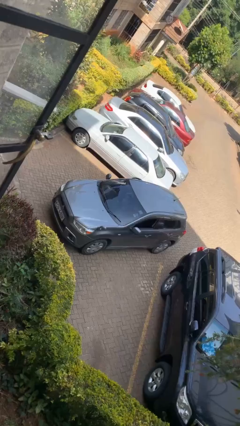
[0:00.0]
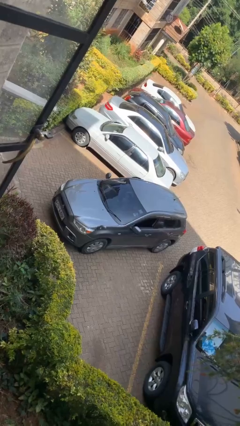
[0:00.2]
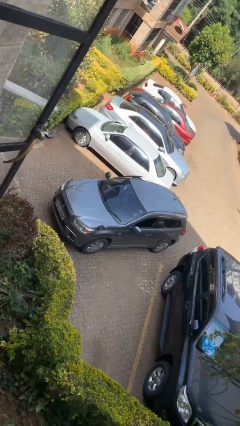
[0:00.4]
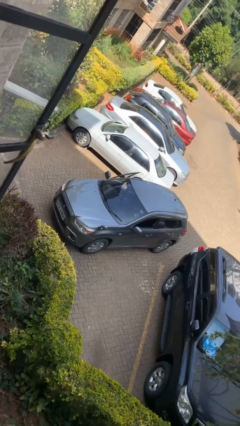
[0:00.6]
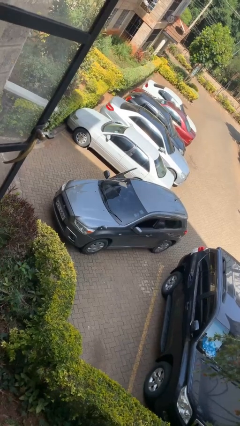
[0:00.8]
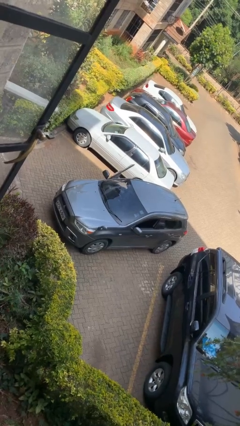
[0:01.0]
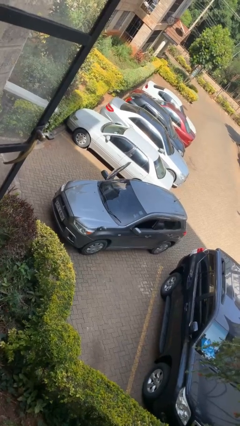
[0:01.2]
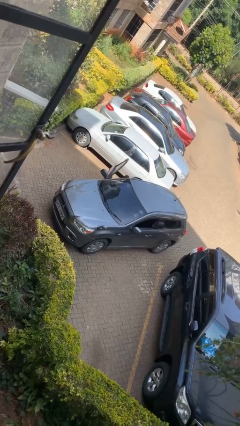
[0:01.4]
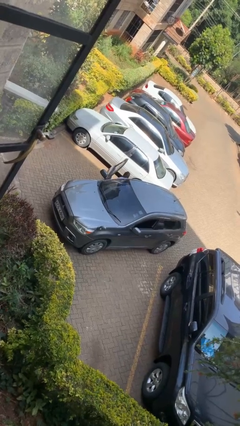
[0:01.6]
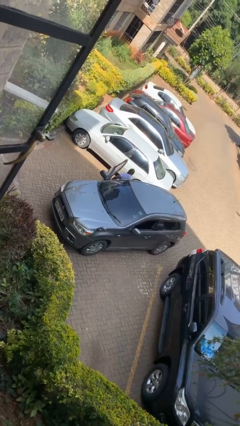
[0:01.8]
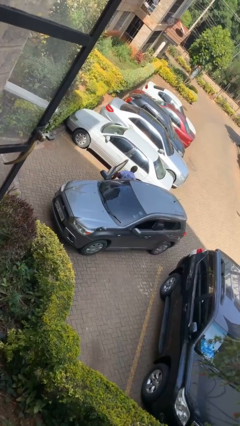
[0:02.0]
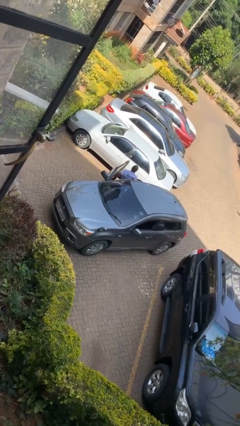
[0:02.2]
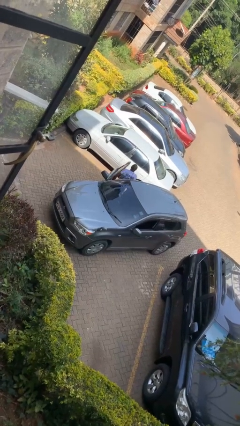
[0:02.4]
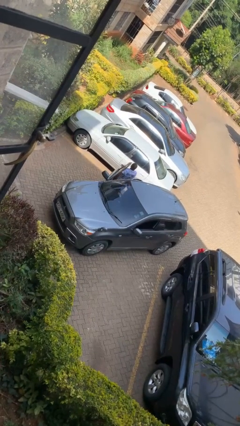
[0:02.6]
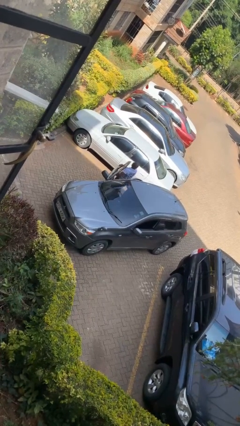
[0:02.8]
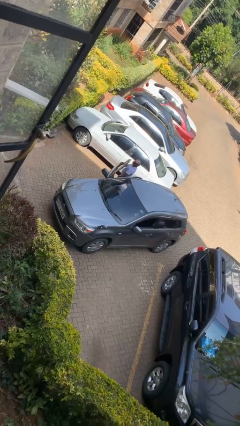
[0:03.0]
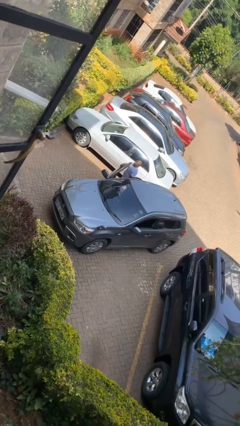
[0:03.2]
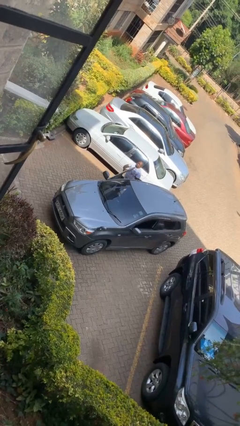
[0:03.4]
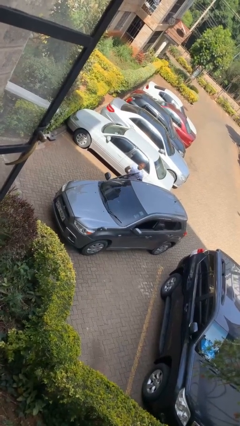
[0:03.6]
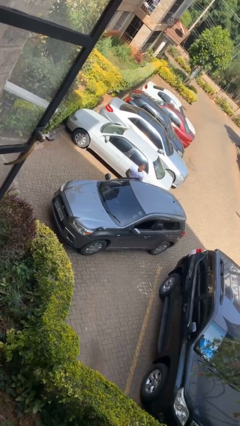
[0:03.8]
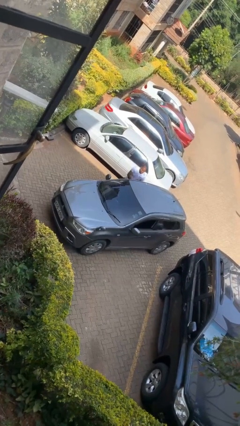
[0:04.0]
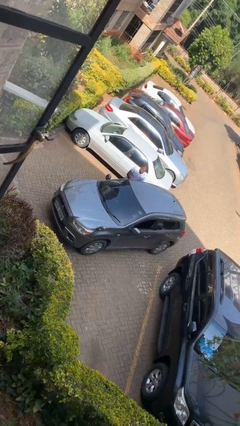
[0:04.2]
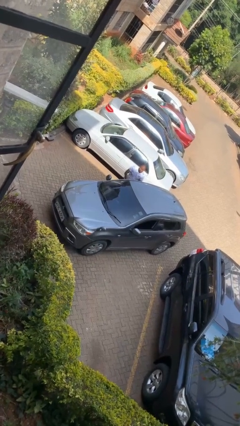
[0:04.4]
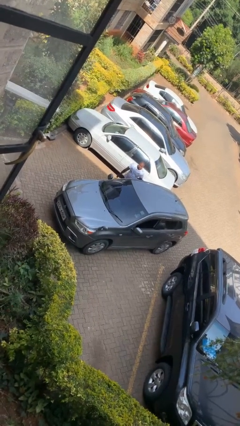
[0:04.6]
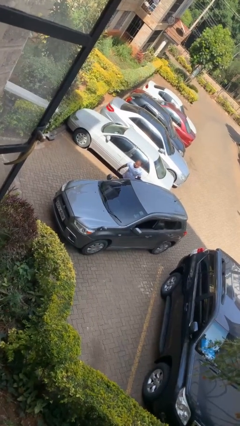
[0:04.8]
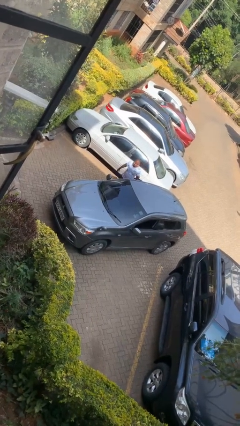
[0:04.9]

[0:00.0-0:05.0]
car drops off person

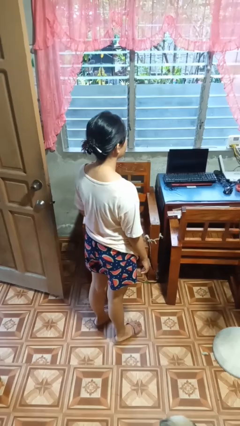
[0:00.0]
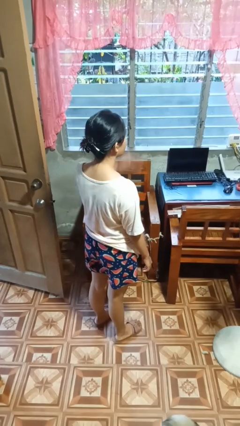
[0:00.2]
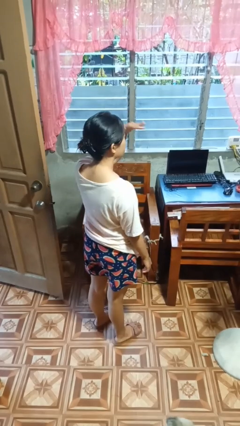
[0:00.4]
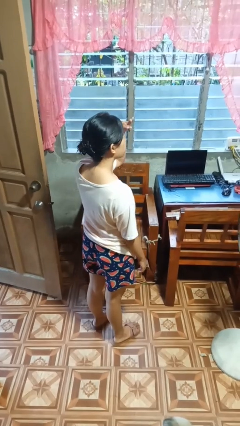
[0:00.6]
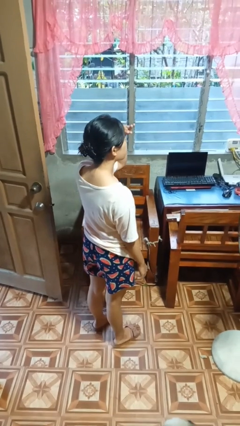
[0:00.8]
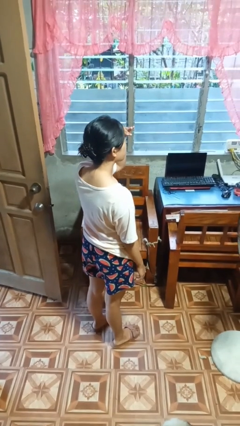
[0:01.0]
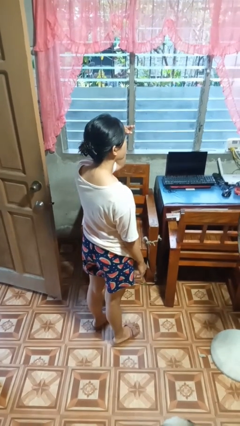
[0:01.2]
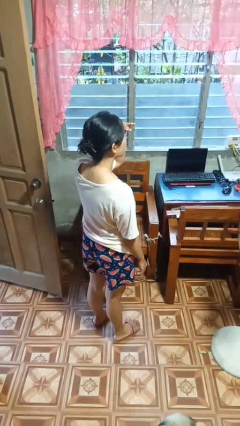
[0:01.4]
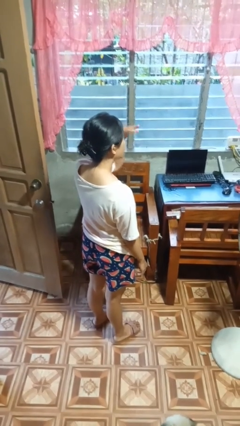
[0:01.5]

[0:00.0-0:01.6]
person shades eyes

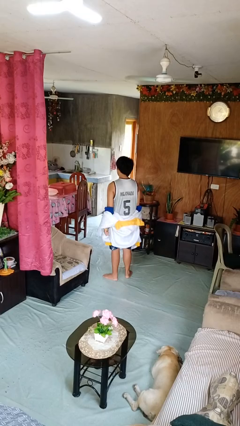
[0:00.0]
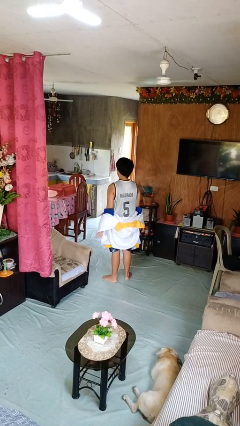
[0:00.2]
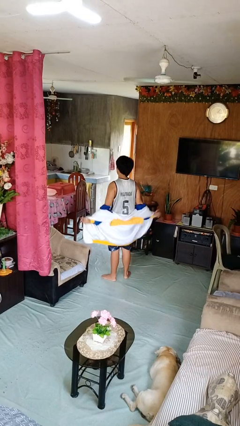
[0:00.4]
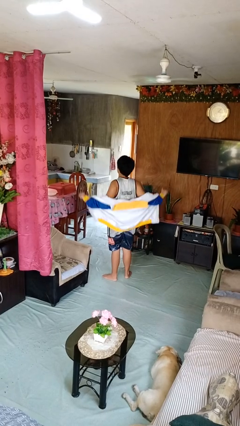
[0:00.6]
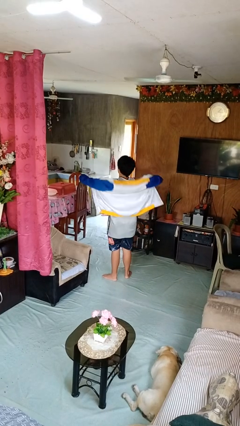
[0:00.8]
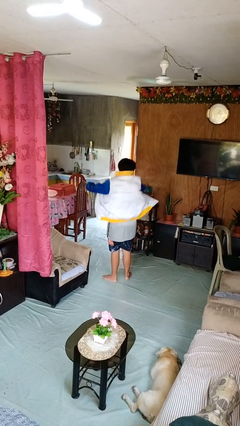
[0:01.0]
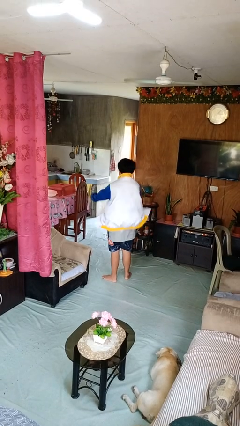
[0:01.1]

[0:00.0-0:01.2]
person puts on jacket

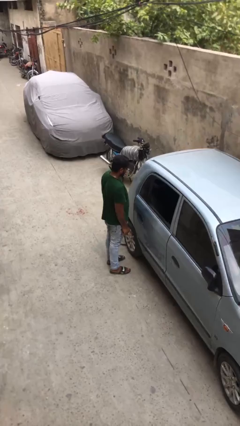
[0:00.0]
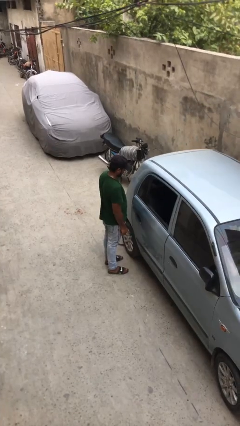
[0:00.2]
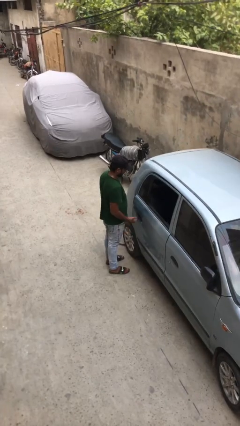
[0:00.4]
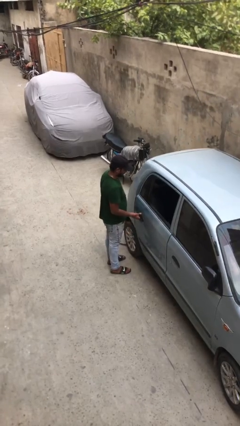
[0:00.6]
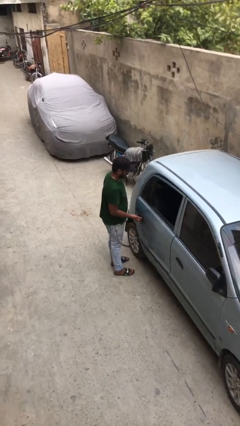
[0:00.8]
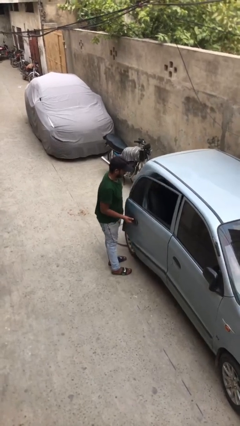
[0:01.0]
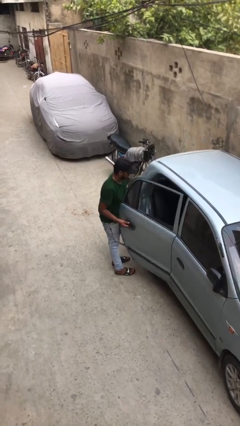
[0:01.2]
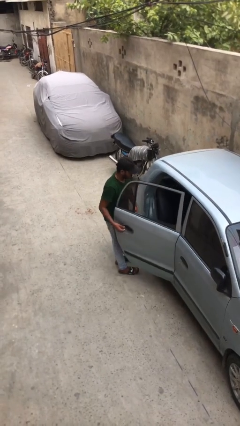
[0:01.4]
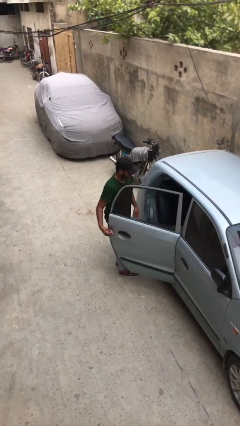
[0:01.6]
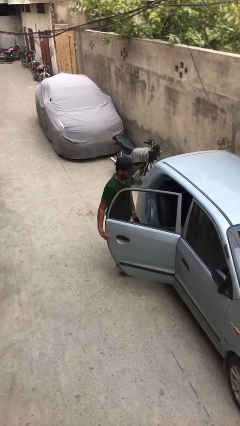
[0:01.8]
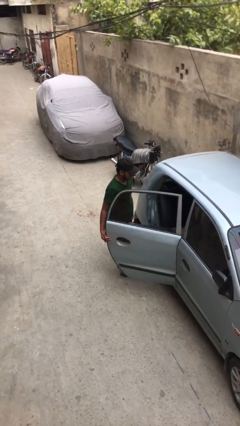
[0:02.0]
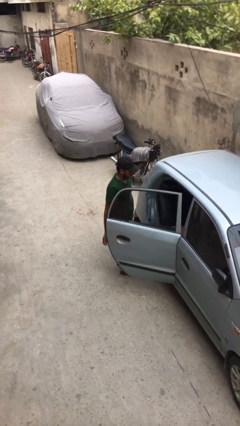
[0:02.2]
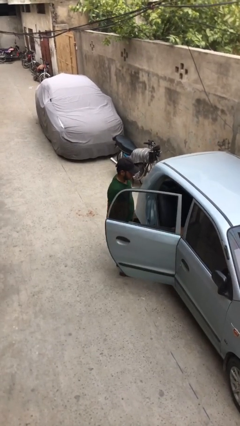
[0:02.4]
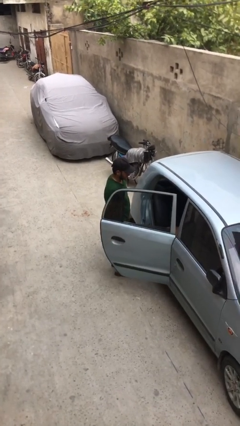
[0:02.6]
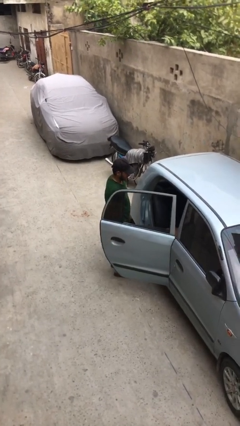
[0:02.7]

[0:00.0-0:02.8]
person opens car door

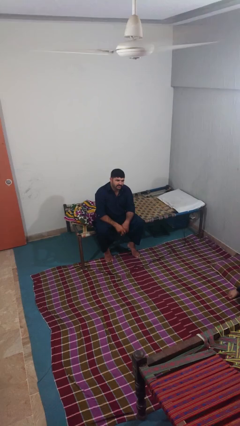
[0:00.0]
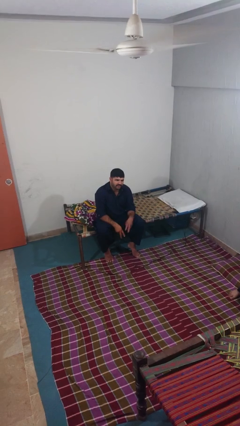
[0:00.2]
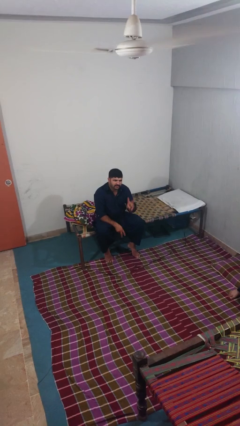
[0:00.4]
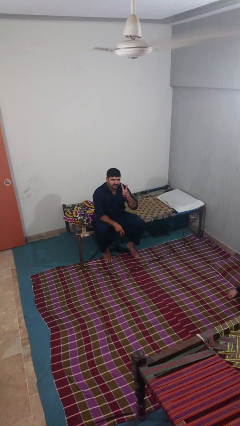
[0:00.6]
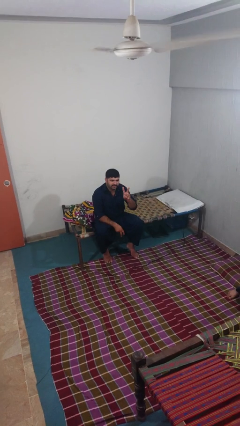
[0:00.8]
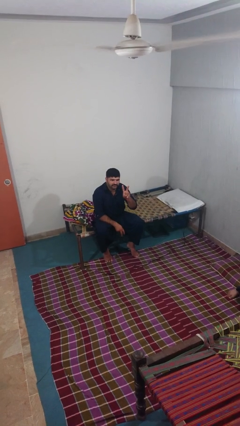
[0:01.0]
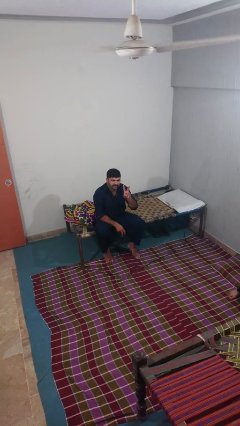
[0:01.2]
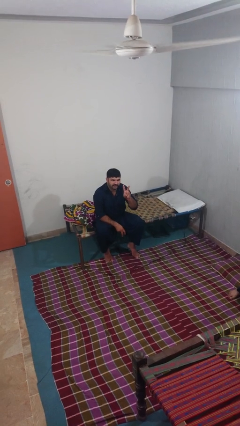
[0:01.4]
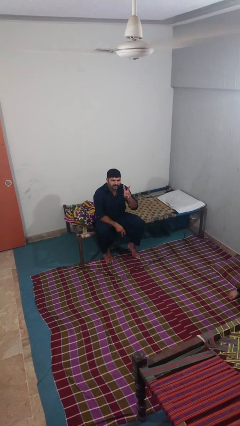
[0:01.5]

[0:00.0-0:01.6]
person gestures peace

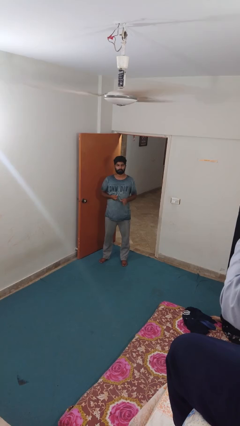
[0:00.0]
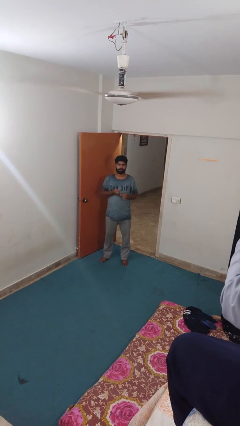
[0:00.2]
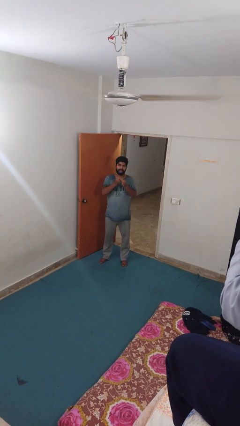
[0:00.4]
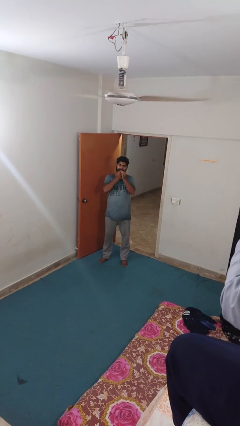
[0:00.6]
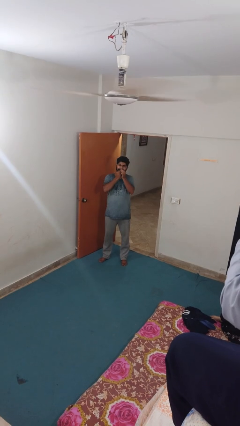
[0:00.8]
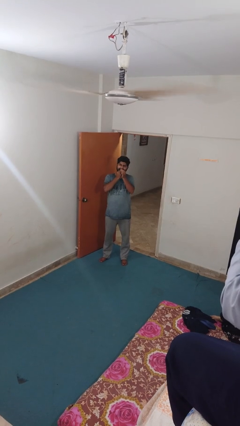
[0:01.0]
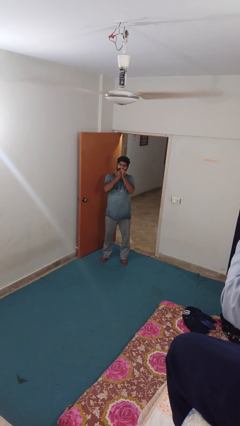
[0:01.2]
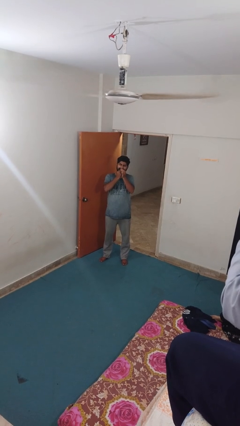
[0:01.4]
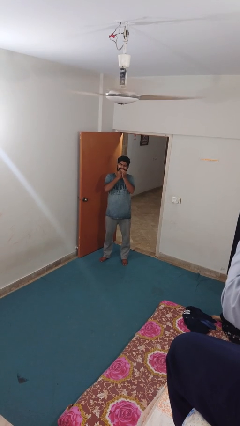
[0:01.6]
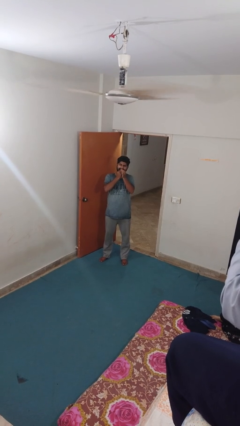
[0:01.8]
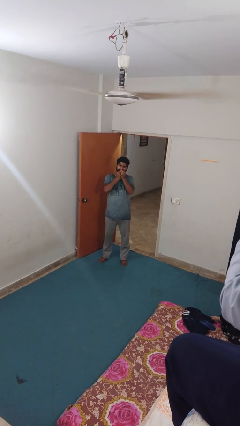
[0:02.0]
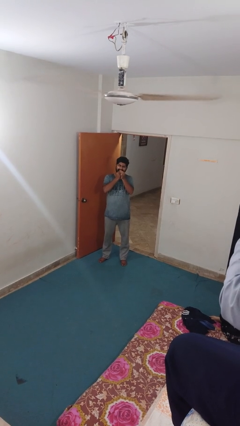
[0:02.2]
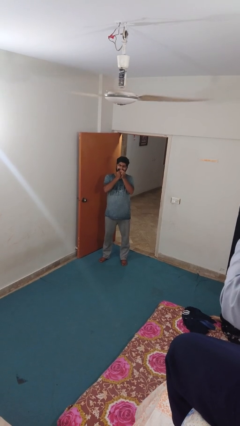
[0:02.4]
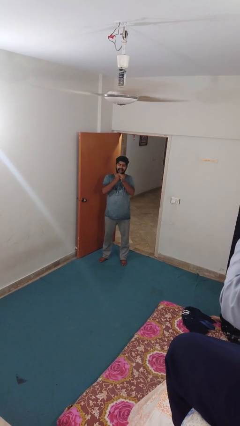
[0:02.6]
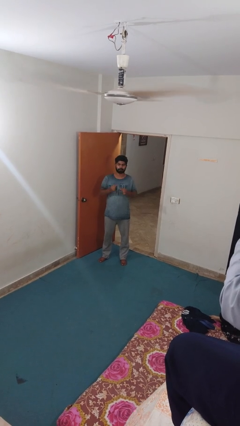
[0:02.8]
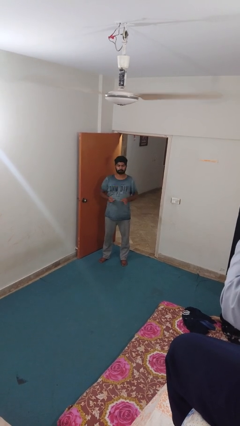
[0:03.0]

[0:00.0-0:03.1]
person flosses

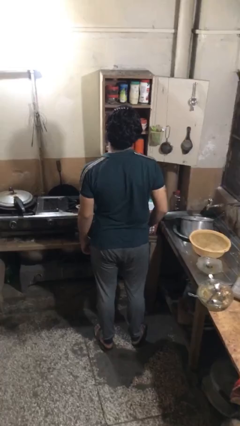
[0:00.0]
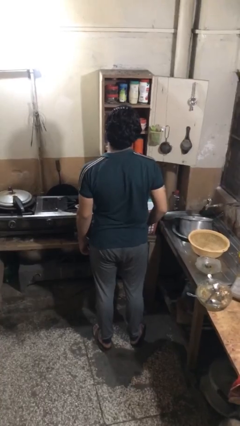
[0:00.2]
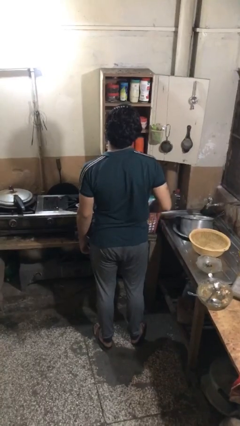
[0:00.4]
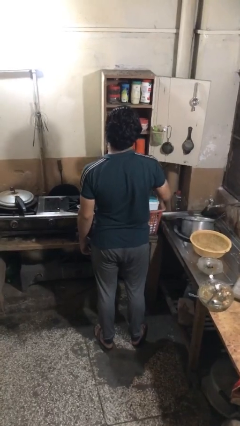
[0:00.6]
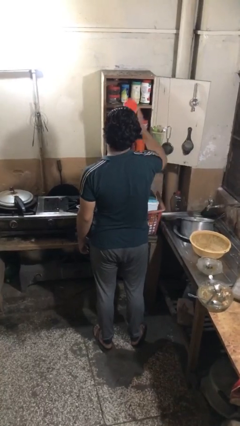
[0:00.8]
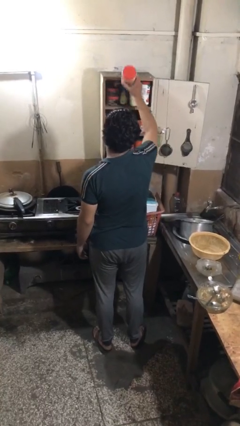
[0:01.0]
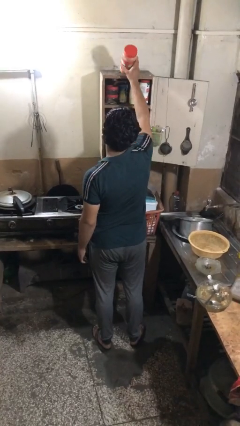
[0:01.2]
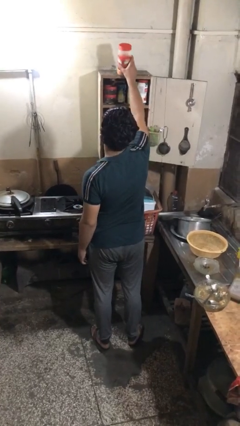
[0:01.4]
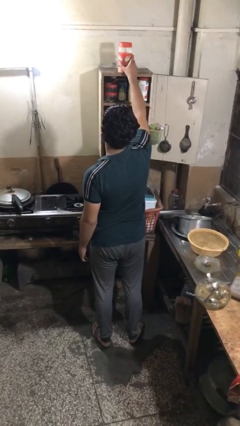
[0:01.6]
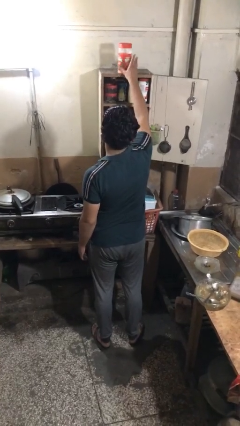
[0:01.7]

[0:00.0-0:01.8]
person takes object from cabinet
